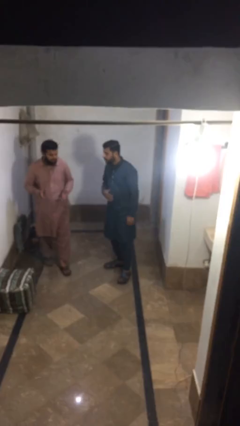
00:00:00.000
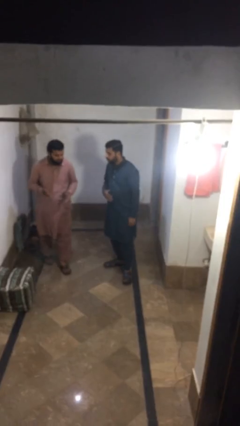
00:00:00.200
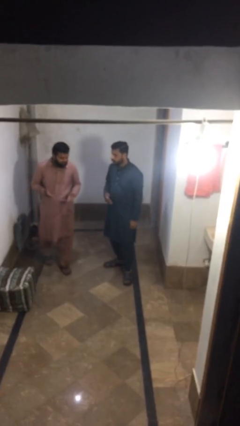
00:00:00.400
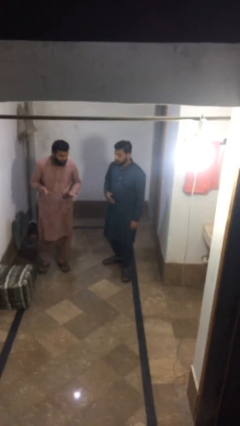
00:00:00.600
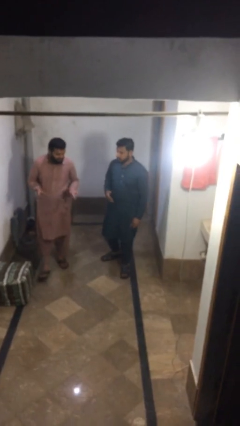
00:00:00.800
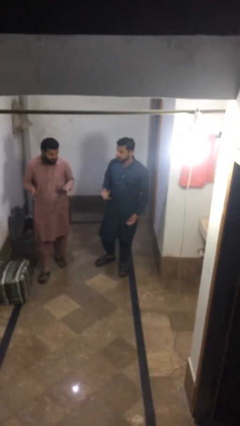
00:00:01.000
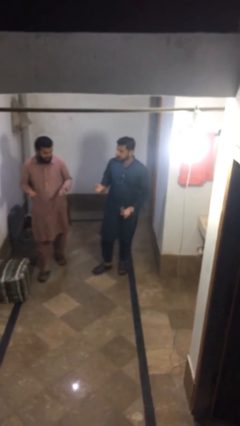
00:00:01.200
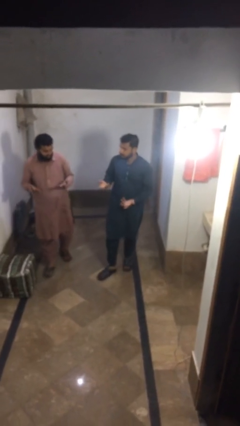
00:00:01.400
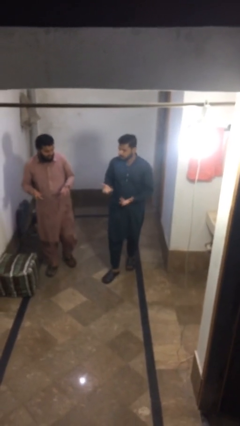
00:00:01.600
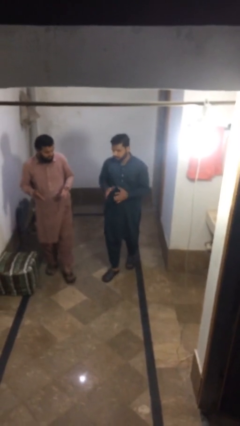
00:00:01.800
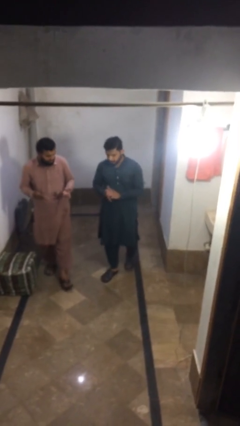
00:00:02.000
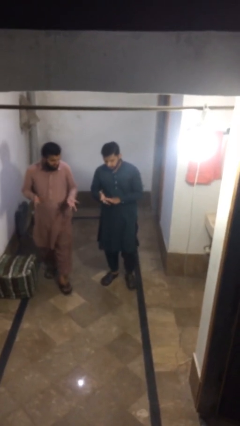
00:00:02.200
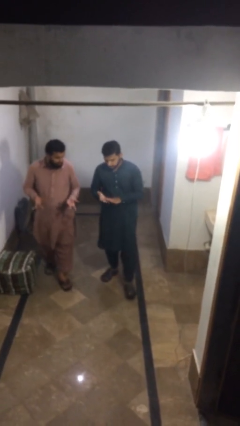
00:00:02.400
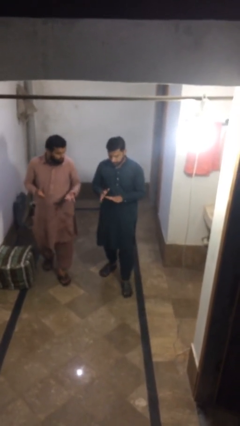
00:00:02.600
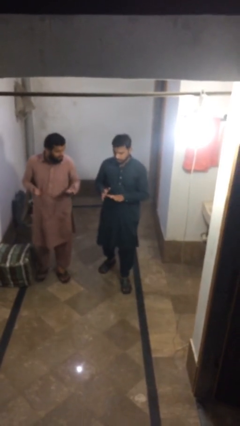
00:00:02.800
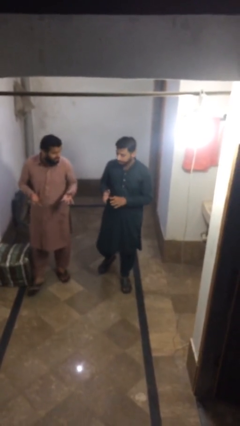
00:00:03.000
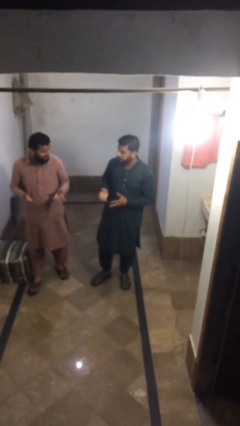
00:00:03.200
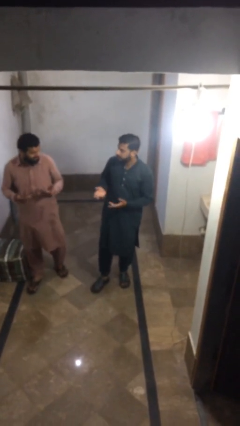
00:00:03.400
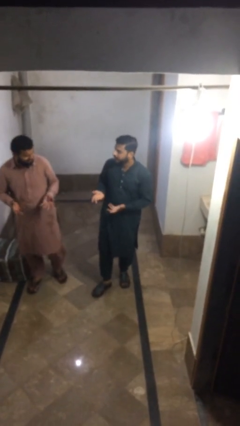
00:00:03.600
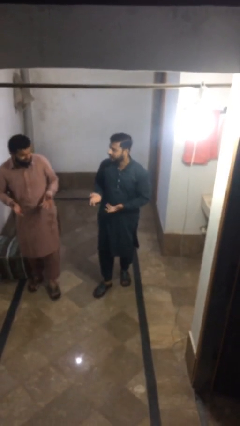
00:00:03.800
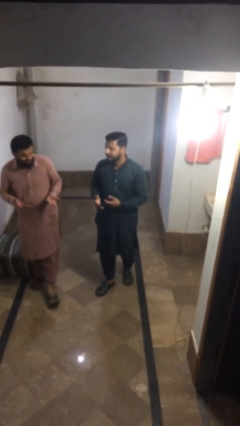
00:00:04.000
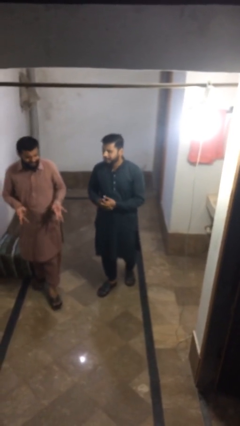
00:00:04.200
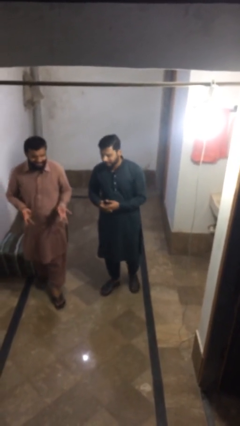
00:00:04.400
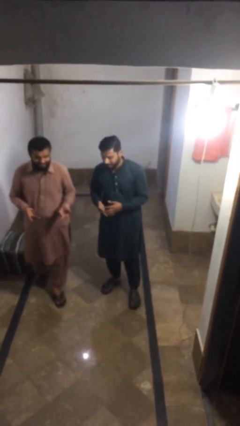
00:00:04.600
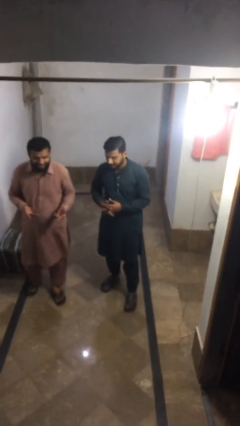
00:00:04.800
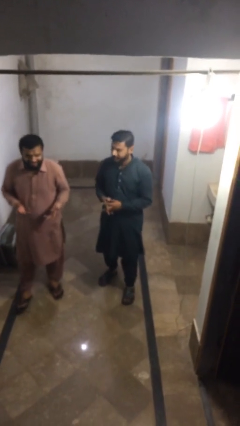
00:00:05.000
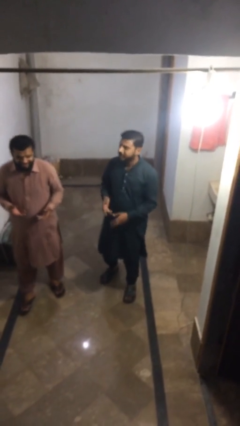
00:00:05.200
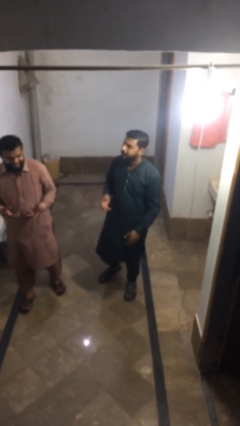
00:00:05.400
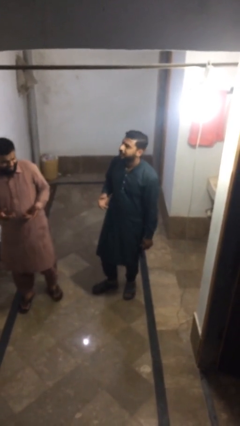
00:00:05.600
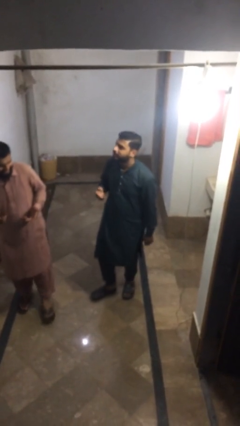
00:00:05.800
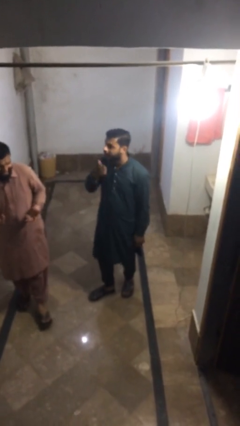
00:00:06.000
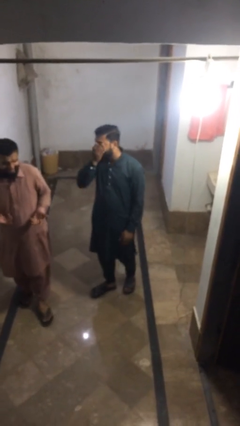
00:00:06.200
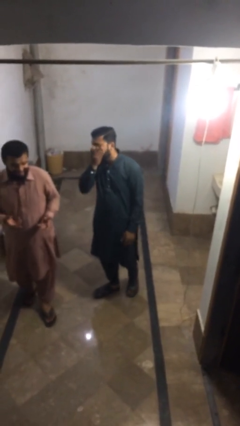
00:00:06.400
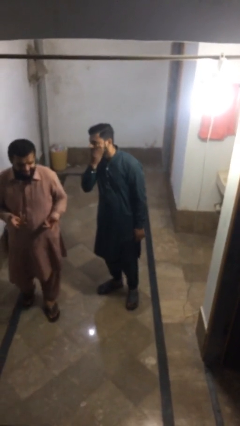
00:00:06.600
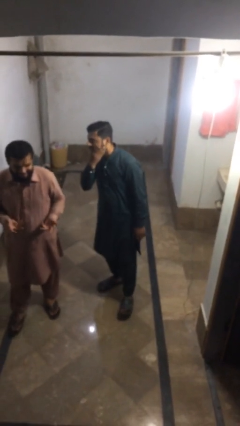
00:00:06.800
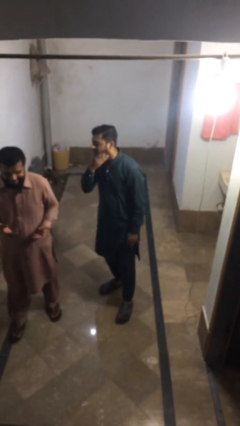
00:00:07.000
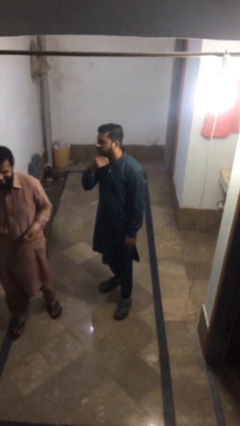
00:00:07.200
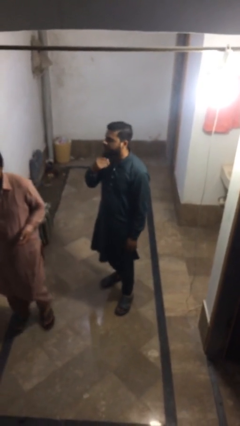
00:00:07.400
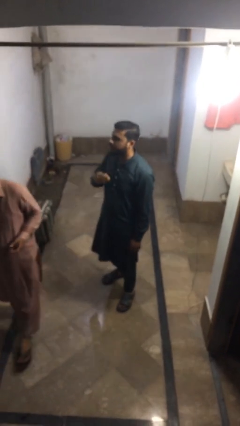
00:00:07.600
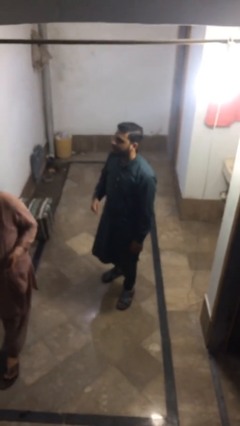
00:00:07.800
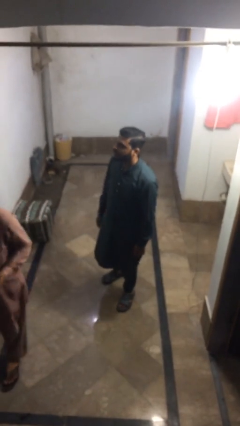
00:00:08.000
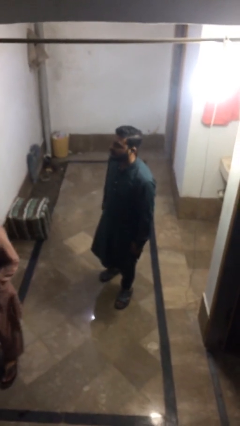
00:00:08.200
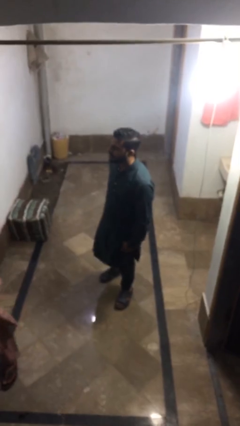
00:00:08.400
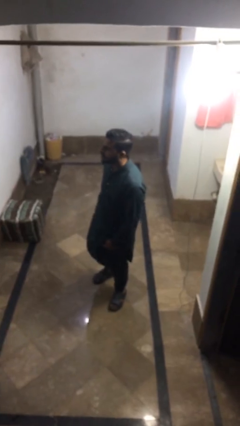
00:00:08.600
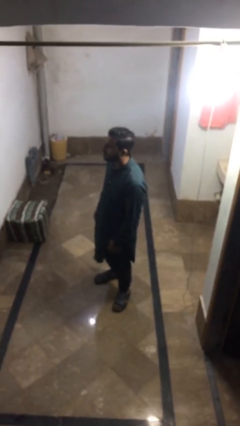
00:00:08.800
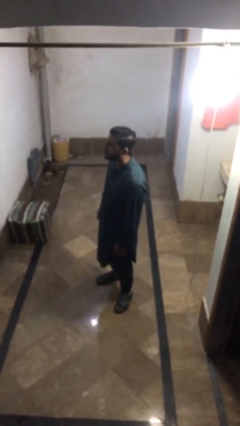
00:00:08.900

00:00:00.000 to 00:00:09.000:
person talks to person

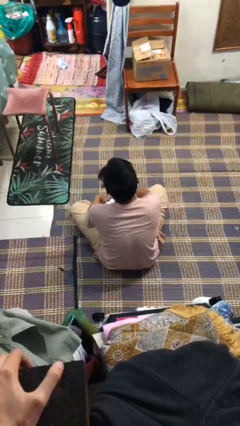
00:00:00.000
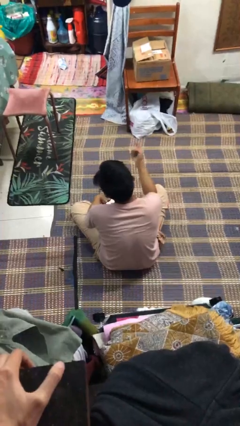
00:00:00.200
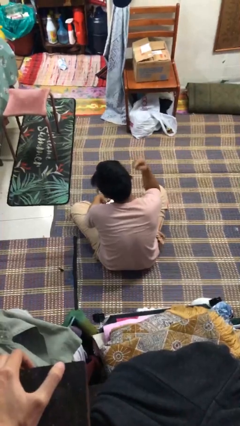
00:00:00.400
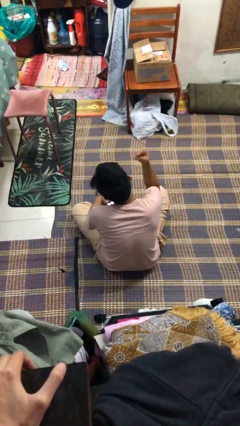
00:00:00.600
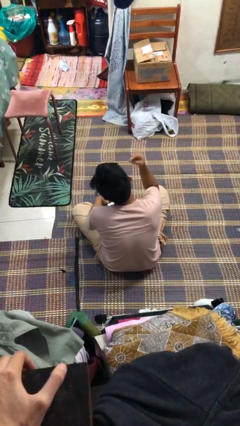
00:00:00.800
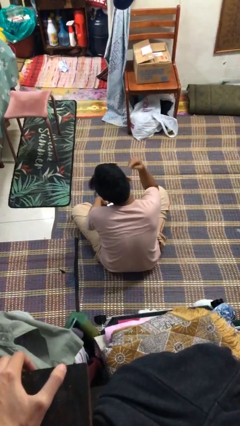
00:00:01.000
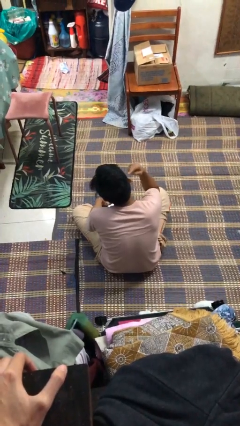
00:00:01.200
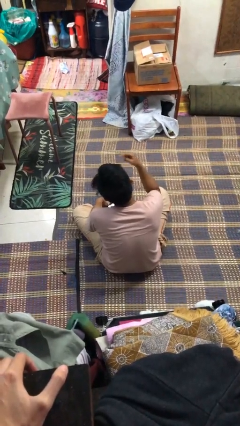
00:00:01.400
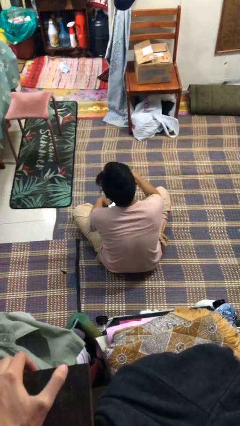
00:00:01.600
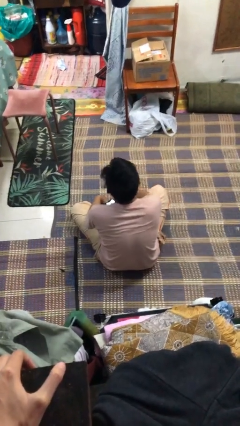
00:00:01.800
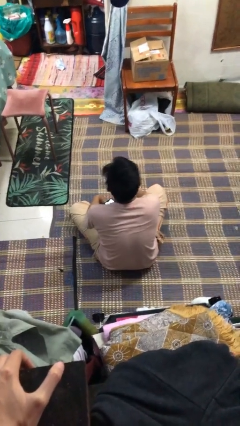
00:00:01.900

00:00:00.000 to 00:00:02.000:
person gestures listen closely

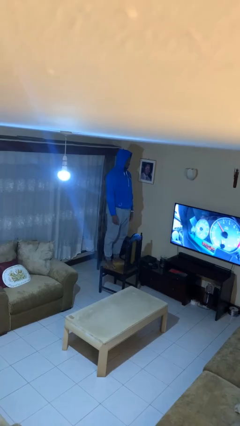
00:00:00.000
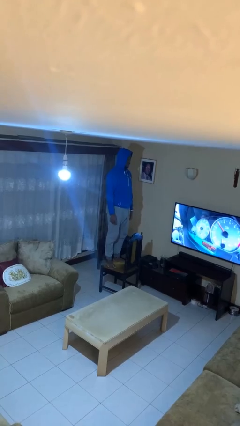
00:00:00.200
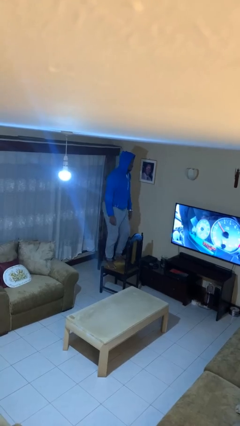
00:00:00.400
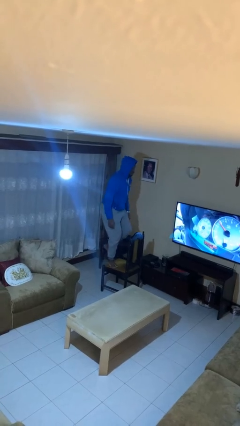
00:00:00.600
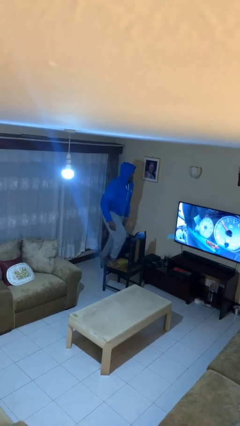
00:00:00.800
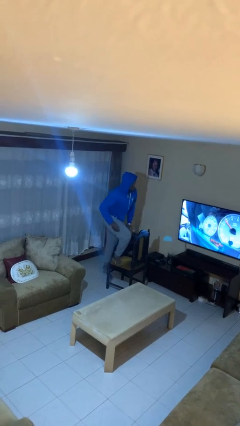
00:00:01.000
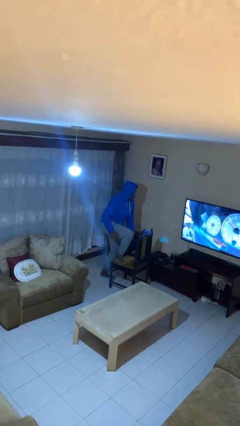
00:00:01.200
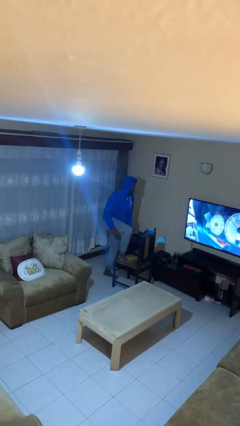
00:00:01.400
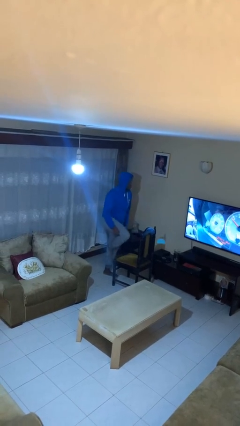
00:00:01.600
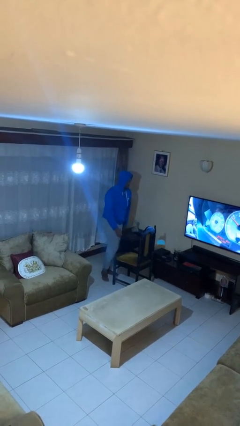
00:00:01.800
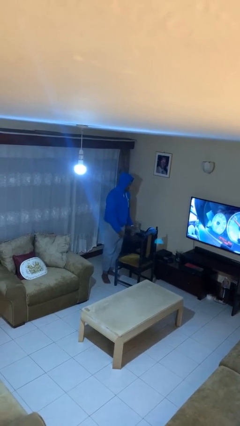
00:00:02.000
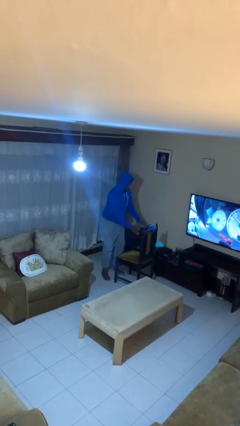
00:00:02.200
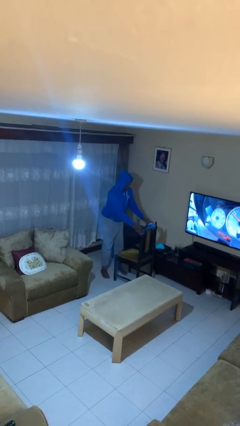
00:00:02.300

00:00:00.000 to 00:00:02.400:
person climbs off chair

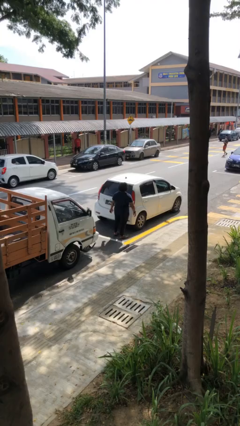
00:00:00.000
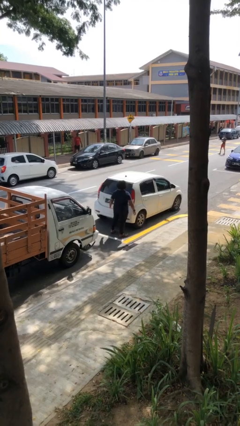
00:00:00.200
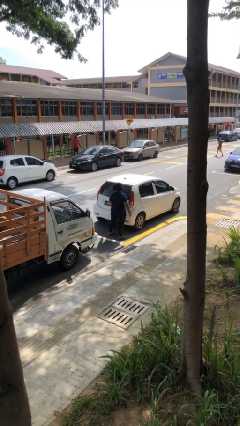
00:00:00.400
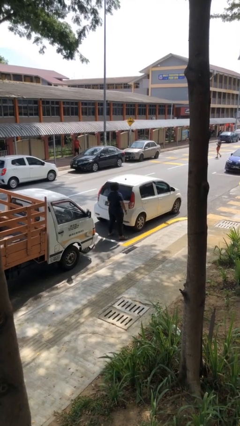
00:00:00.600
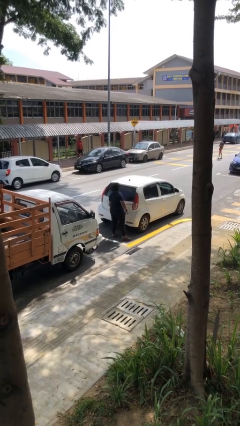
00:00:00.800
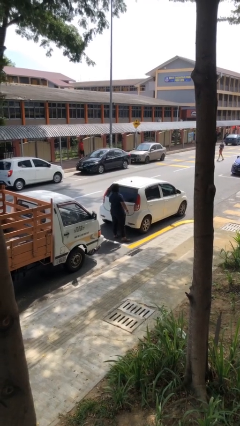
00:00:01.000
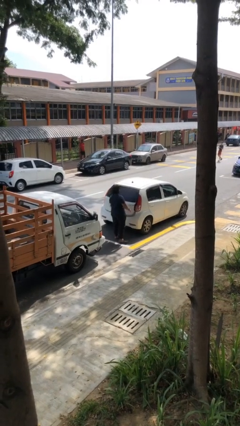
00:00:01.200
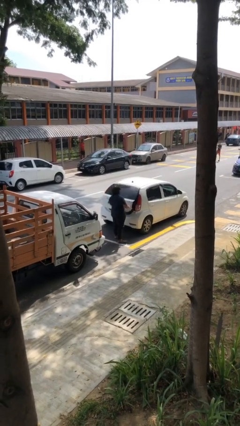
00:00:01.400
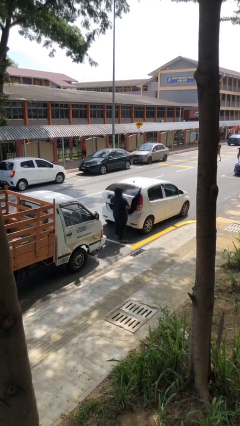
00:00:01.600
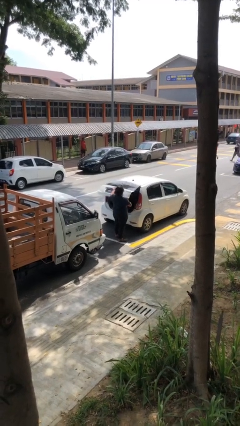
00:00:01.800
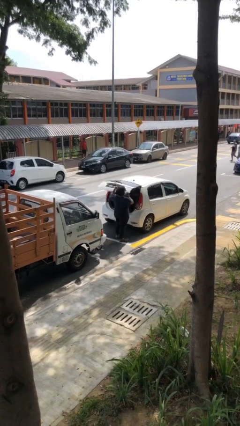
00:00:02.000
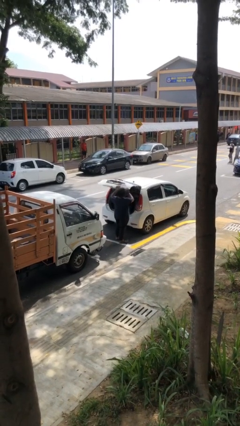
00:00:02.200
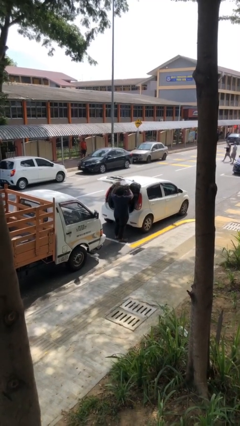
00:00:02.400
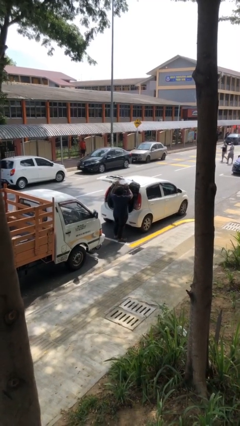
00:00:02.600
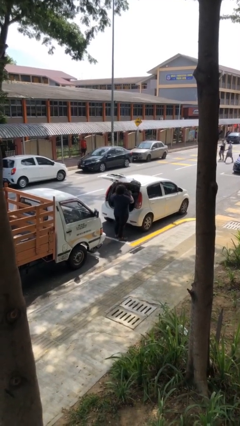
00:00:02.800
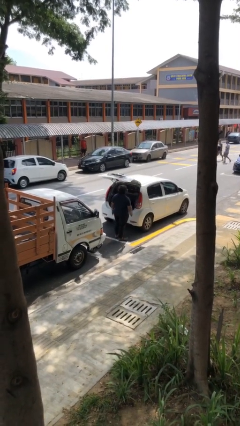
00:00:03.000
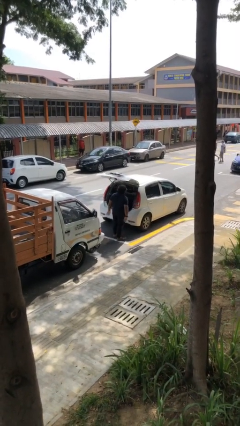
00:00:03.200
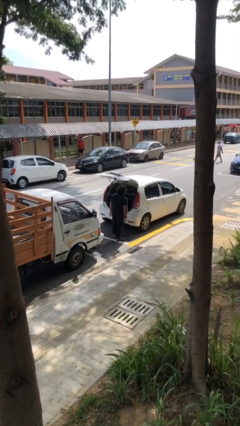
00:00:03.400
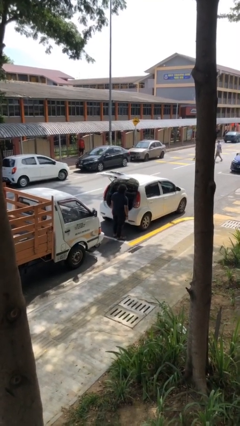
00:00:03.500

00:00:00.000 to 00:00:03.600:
person opens car trunk

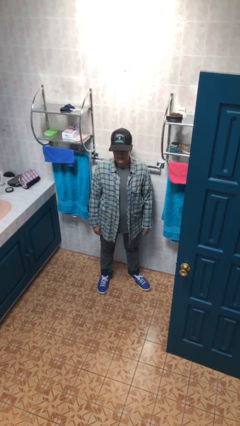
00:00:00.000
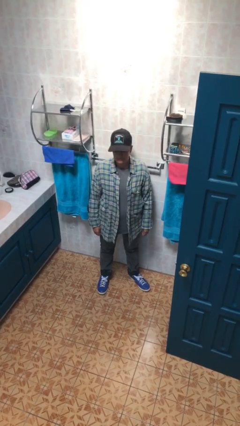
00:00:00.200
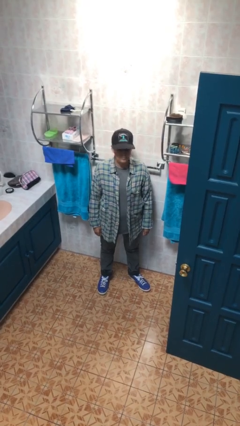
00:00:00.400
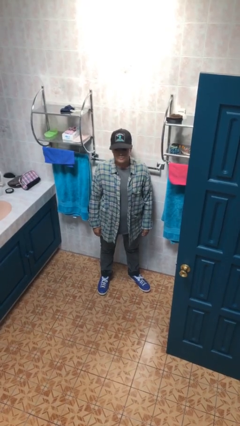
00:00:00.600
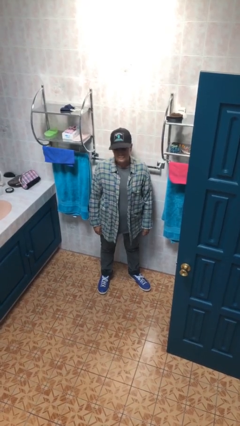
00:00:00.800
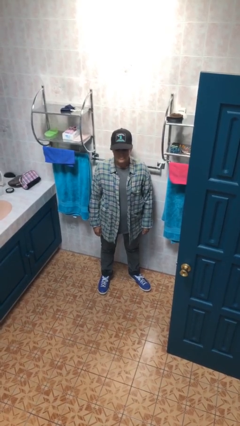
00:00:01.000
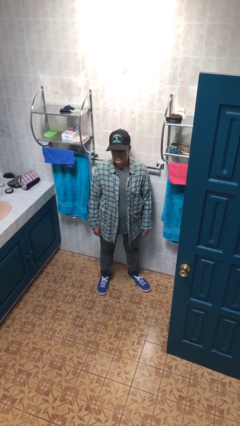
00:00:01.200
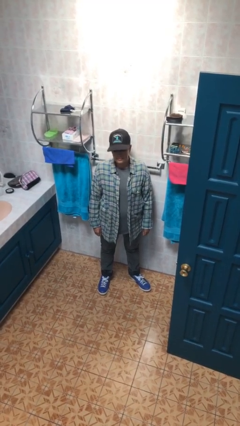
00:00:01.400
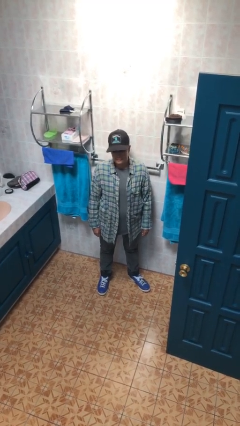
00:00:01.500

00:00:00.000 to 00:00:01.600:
person shakes head
